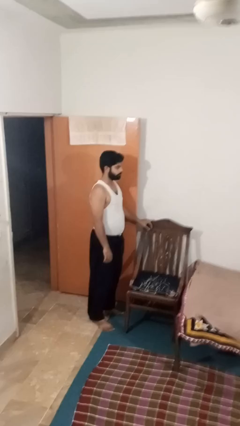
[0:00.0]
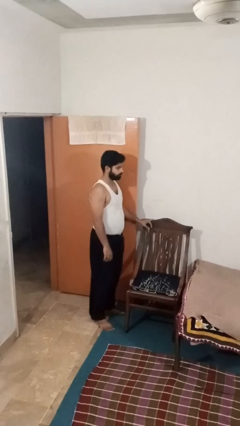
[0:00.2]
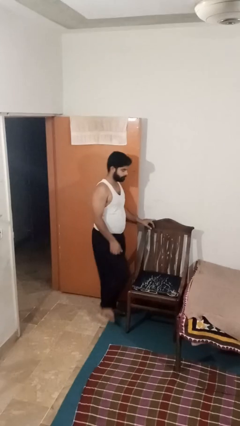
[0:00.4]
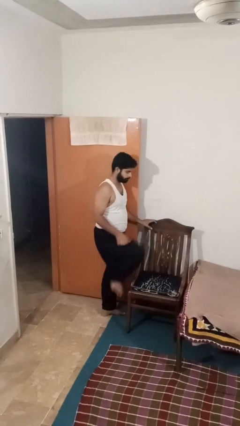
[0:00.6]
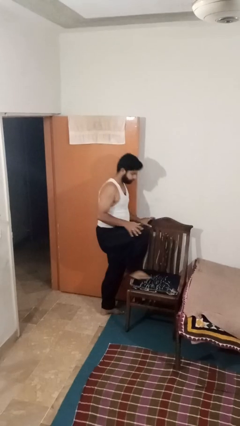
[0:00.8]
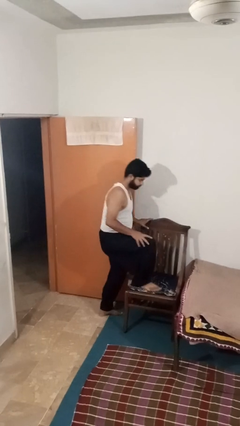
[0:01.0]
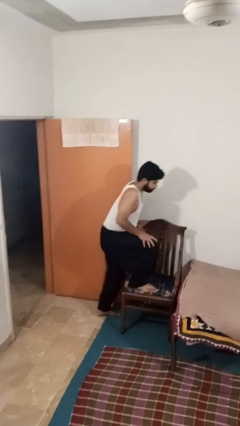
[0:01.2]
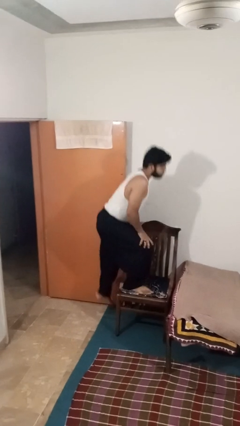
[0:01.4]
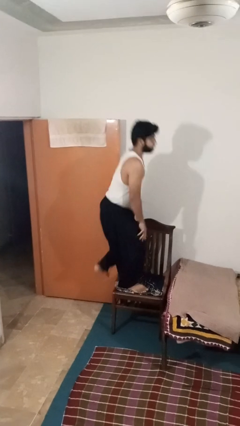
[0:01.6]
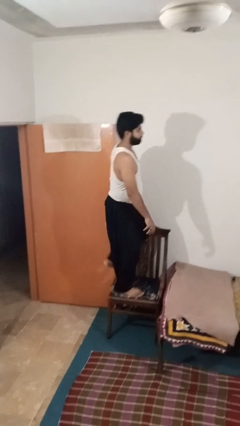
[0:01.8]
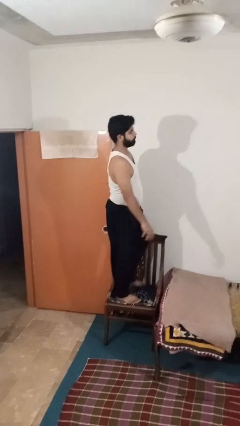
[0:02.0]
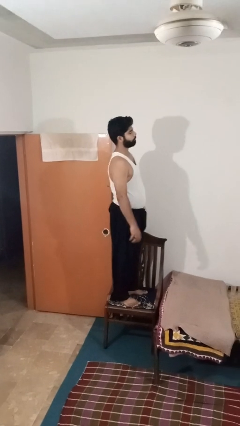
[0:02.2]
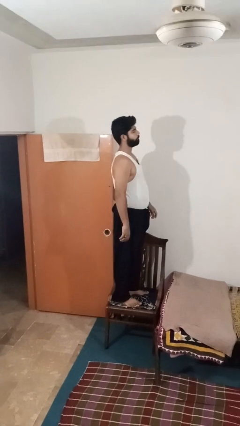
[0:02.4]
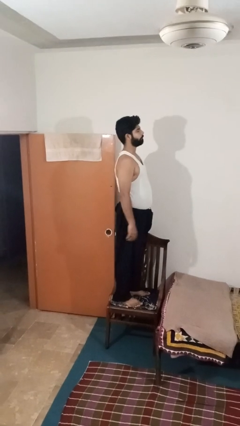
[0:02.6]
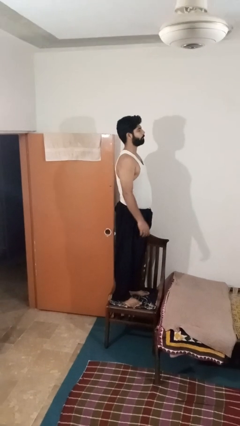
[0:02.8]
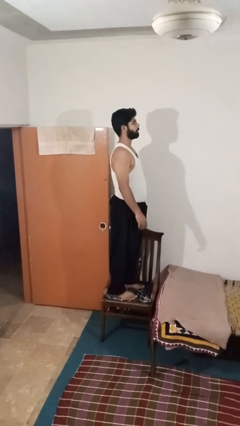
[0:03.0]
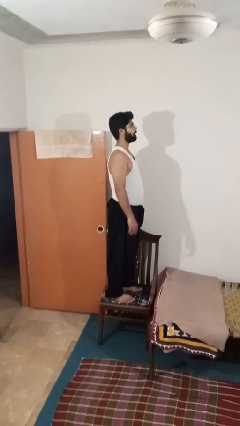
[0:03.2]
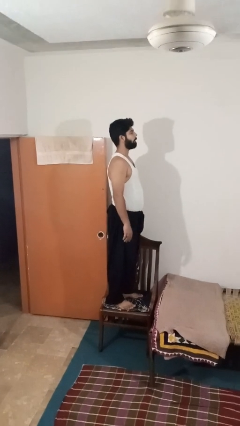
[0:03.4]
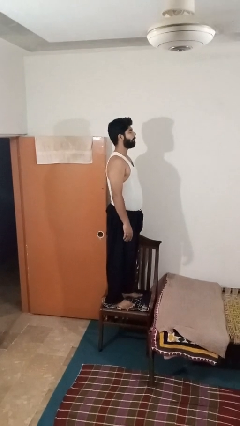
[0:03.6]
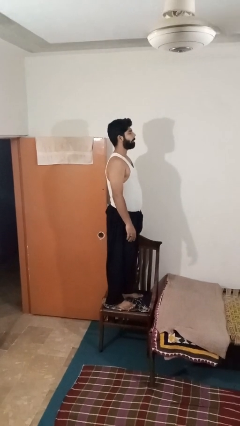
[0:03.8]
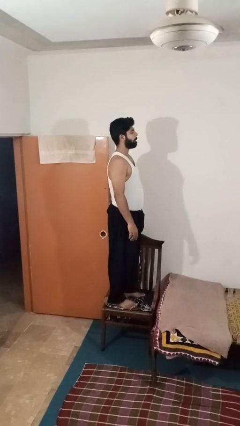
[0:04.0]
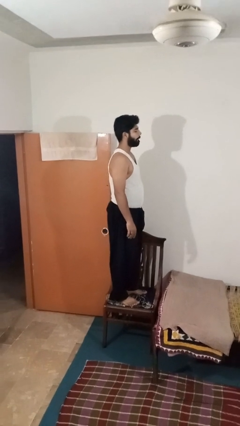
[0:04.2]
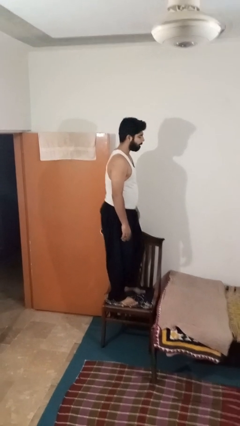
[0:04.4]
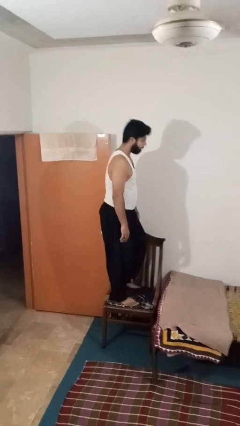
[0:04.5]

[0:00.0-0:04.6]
person climbs on chair

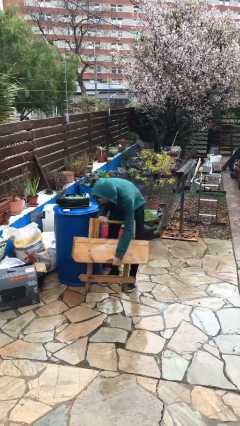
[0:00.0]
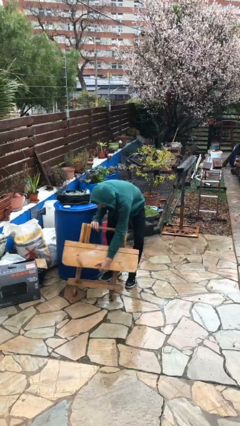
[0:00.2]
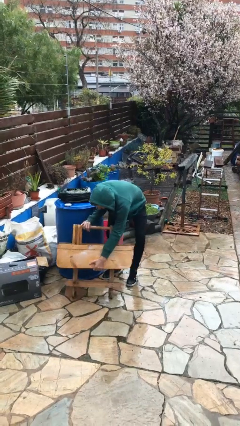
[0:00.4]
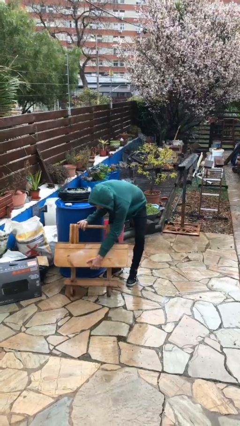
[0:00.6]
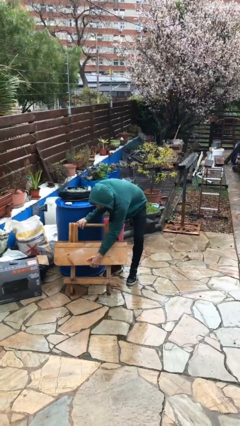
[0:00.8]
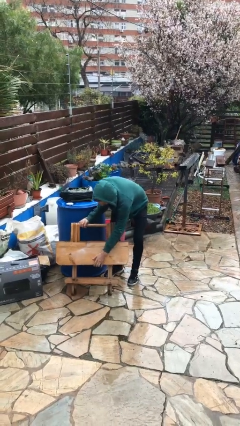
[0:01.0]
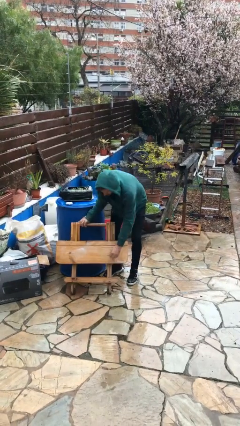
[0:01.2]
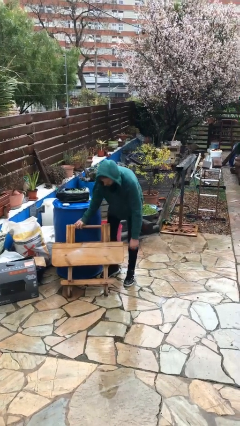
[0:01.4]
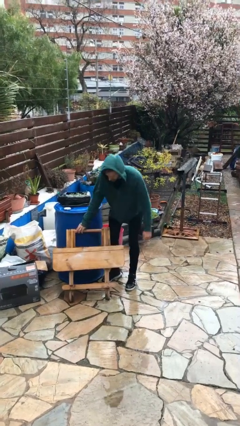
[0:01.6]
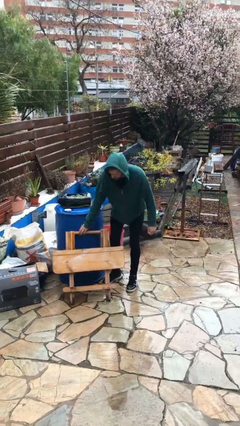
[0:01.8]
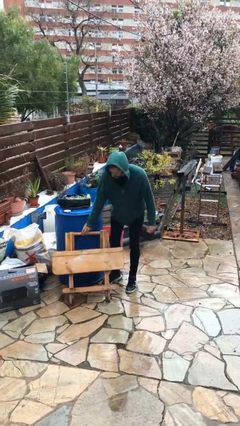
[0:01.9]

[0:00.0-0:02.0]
person puts down object on floor

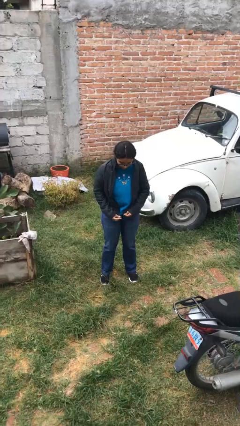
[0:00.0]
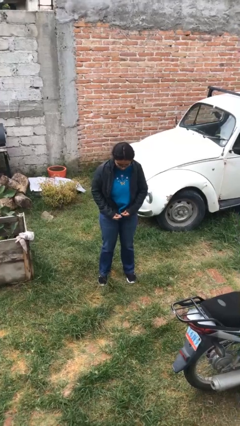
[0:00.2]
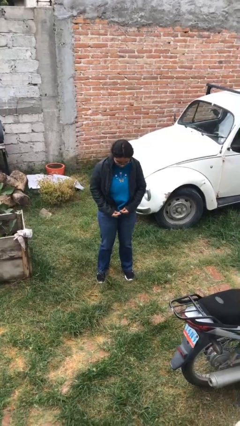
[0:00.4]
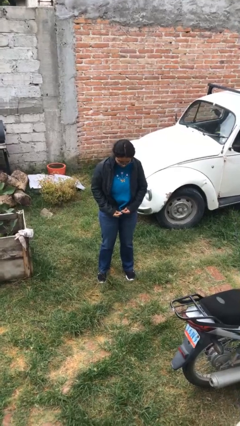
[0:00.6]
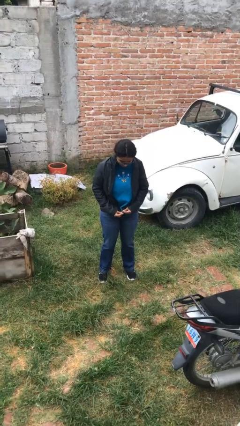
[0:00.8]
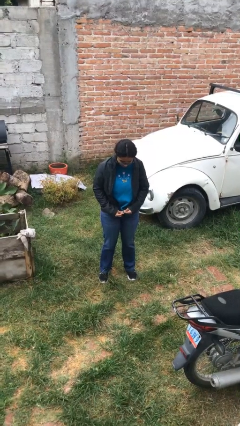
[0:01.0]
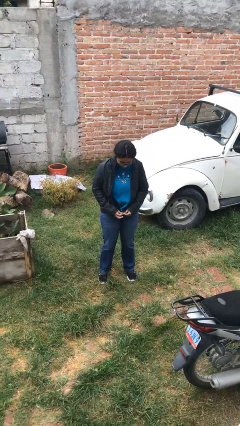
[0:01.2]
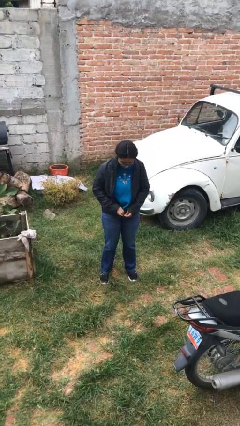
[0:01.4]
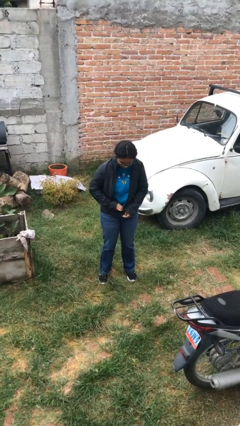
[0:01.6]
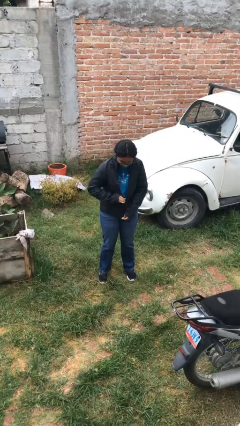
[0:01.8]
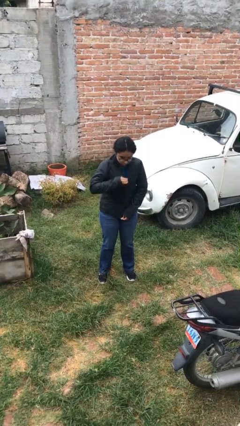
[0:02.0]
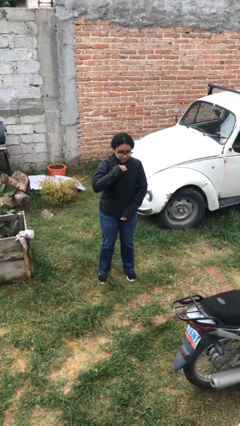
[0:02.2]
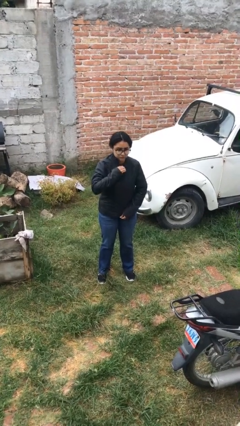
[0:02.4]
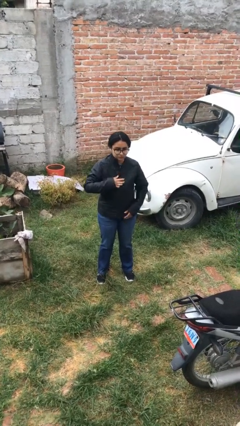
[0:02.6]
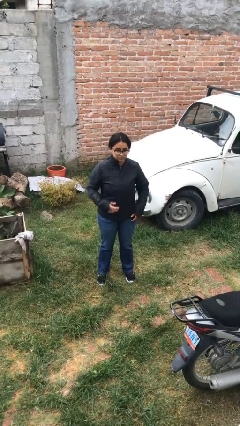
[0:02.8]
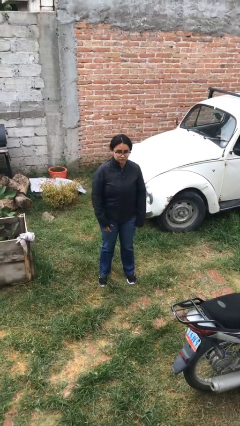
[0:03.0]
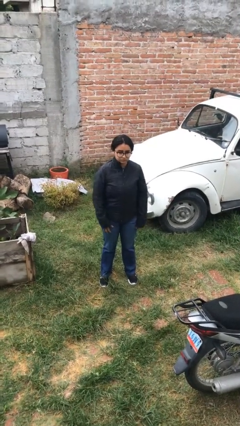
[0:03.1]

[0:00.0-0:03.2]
person zips up jacket

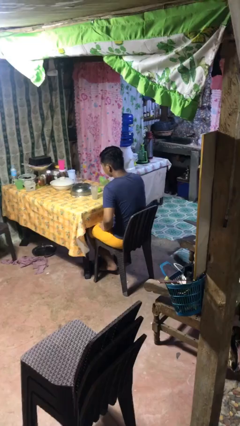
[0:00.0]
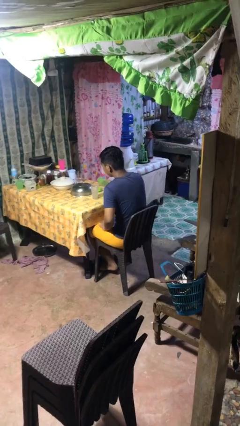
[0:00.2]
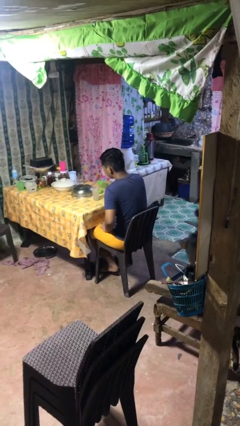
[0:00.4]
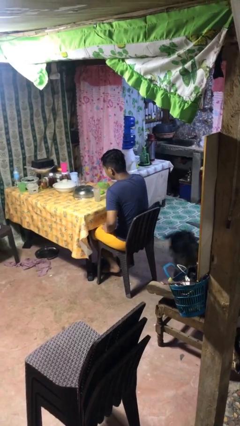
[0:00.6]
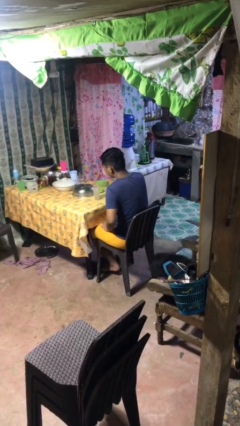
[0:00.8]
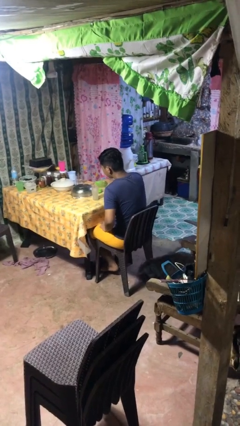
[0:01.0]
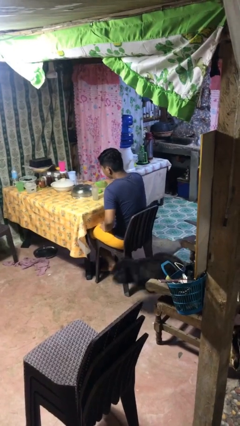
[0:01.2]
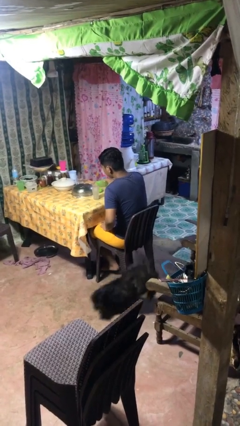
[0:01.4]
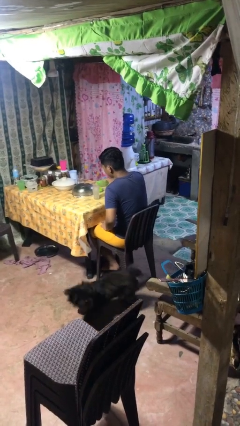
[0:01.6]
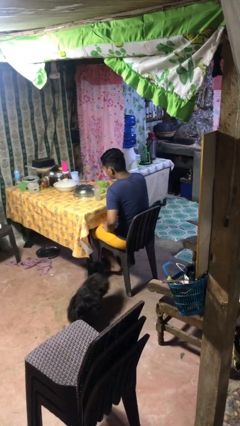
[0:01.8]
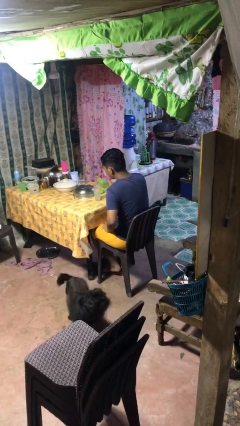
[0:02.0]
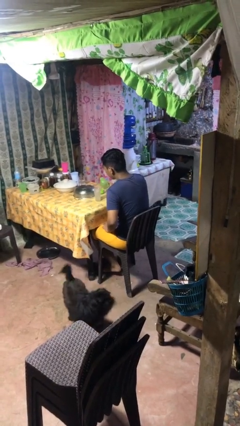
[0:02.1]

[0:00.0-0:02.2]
person pours liquid into cup

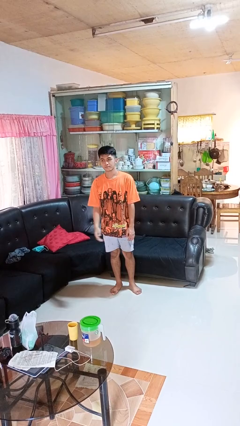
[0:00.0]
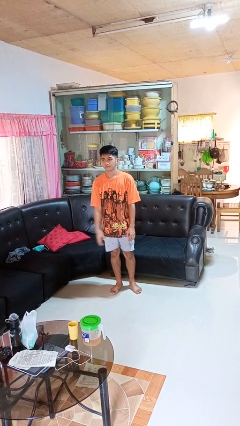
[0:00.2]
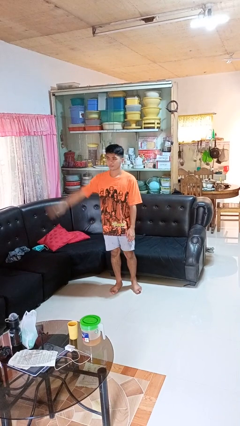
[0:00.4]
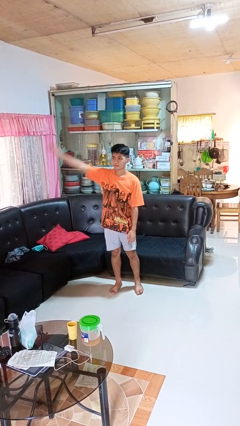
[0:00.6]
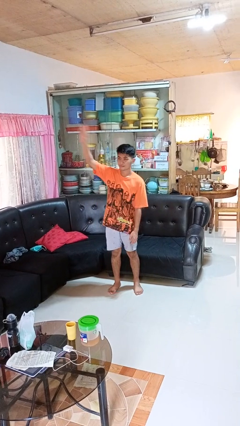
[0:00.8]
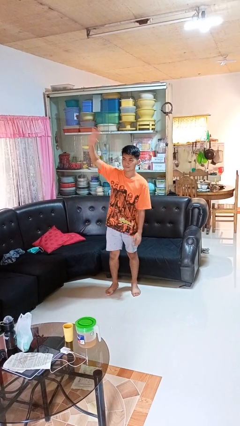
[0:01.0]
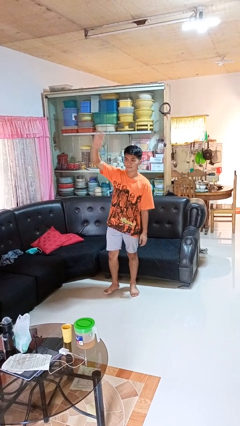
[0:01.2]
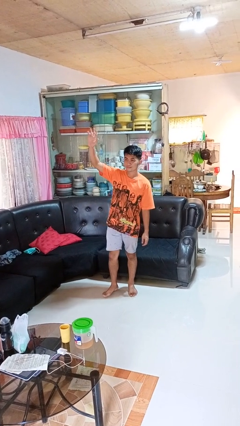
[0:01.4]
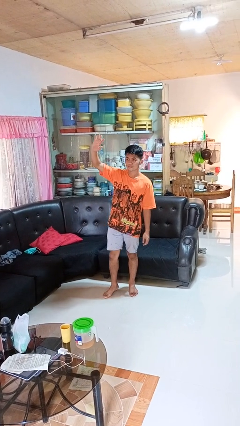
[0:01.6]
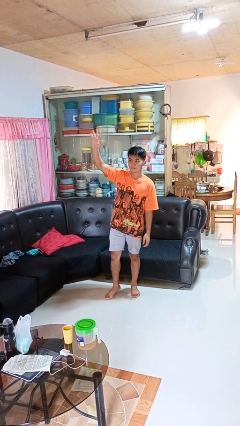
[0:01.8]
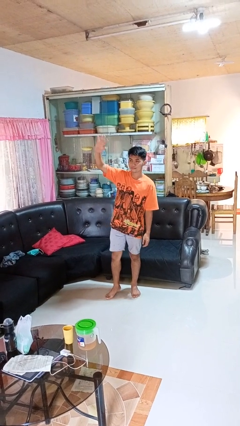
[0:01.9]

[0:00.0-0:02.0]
person waves at person

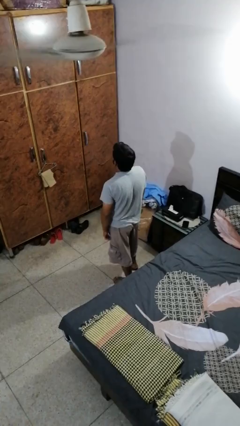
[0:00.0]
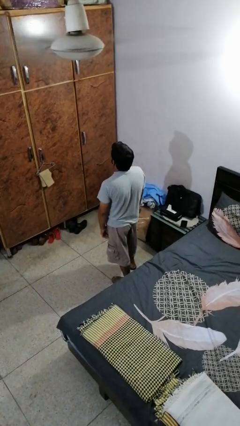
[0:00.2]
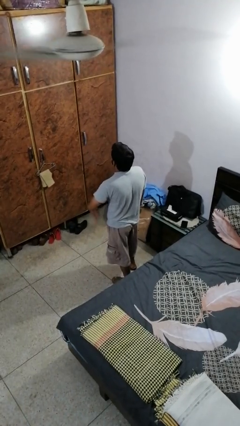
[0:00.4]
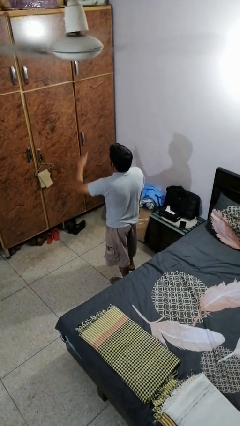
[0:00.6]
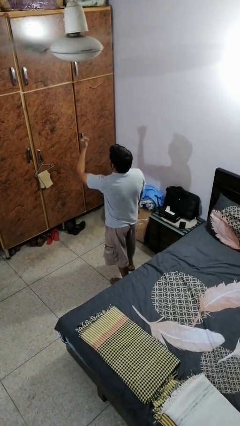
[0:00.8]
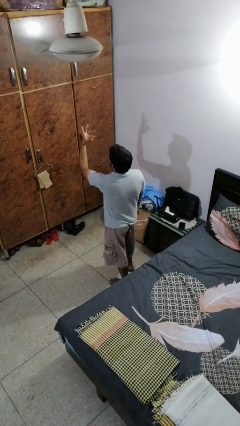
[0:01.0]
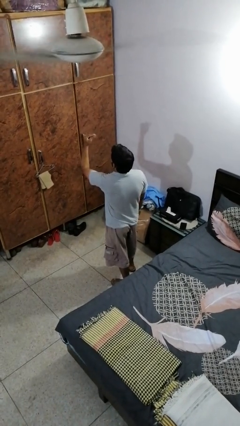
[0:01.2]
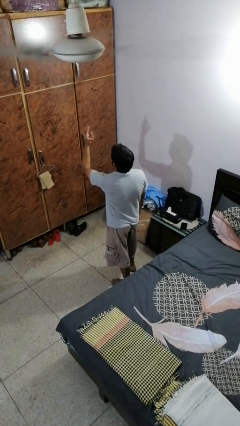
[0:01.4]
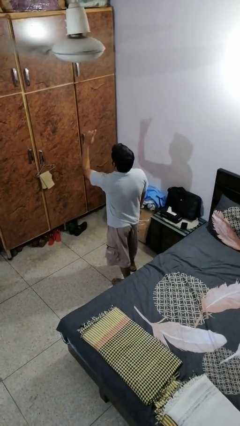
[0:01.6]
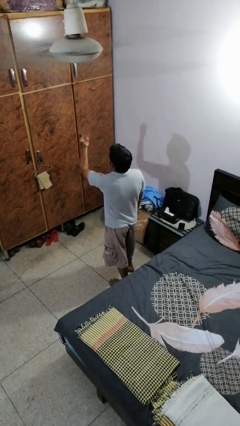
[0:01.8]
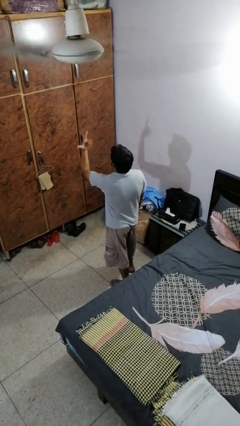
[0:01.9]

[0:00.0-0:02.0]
person snaps fingers

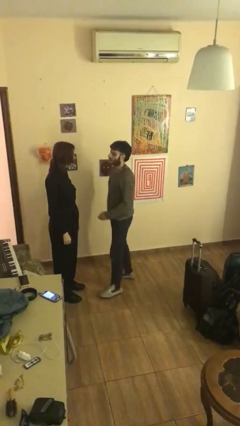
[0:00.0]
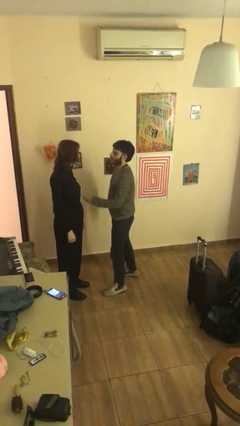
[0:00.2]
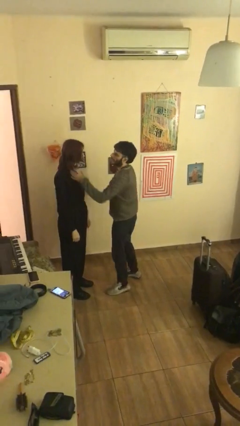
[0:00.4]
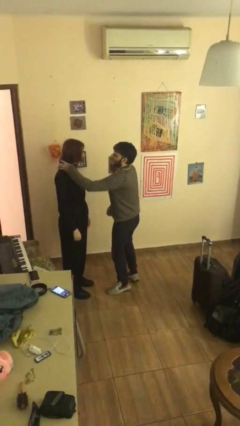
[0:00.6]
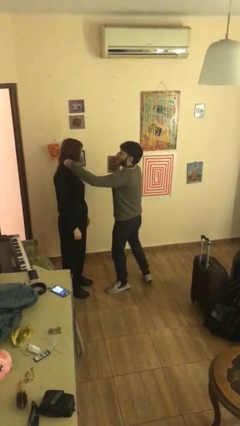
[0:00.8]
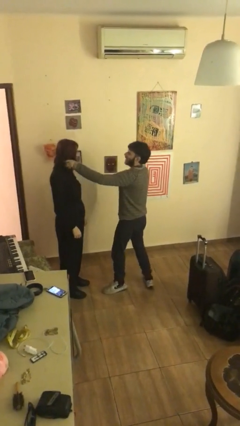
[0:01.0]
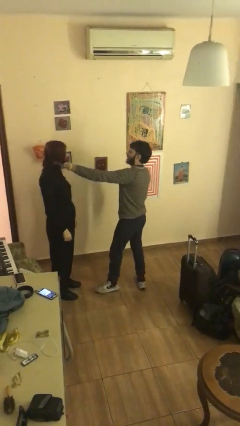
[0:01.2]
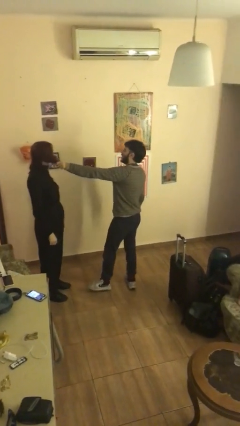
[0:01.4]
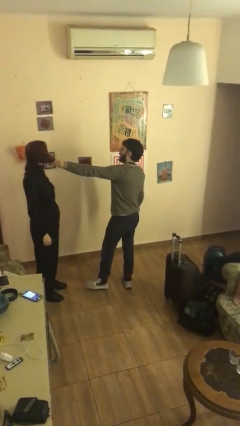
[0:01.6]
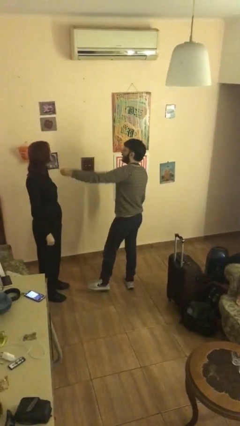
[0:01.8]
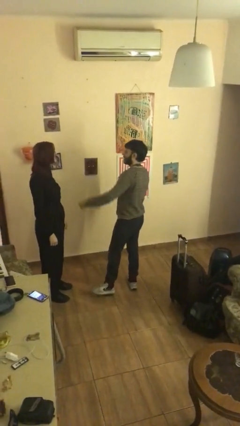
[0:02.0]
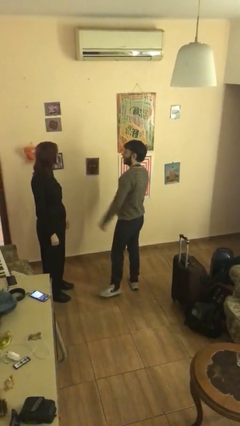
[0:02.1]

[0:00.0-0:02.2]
person grabs person by hair
